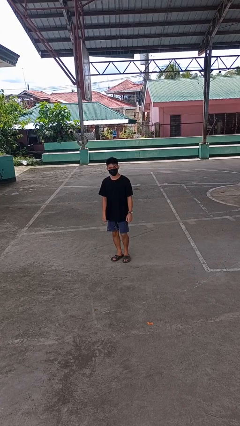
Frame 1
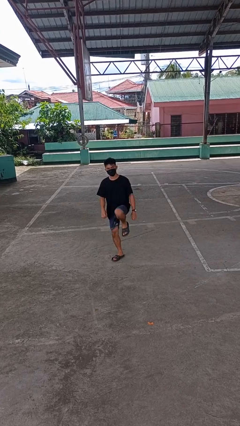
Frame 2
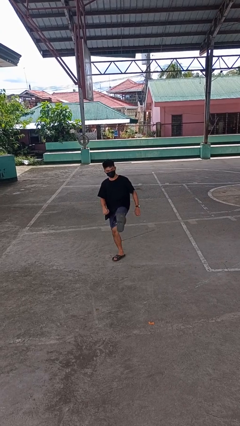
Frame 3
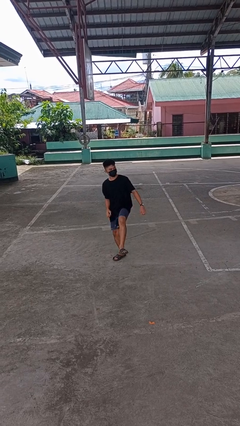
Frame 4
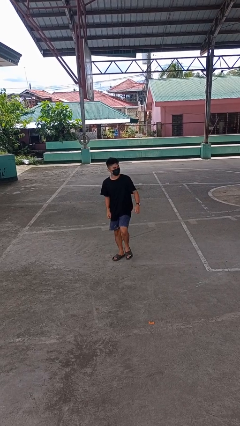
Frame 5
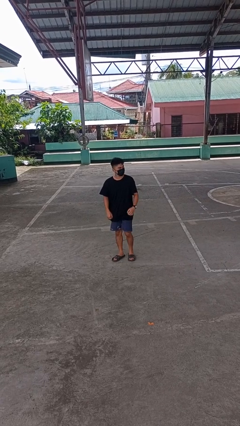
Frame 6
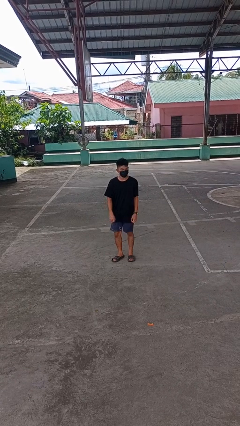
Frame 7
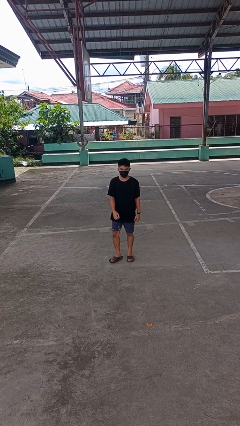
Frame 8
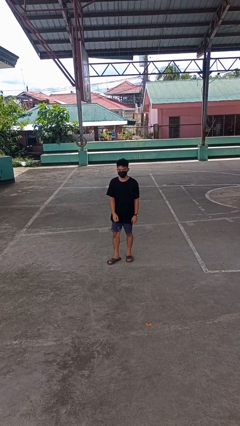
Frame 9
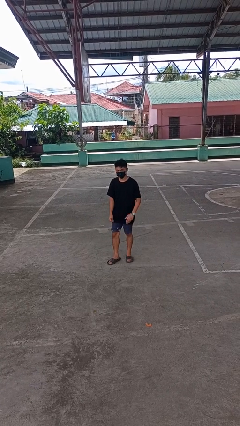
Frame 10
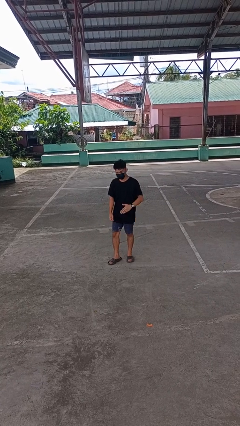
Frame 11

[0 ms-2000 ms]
person karate kicks

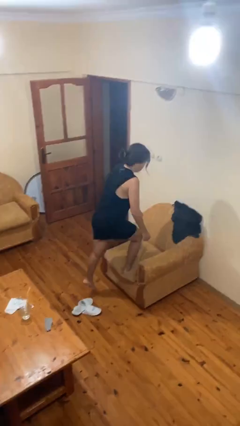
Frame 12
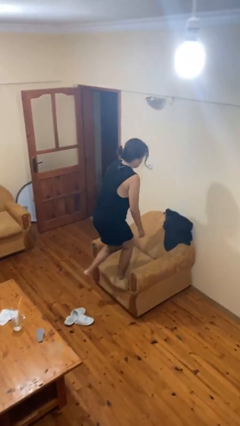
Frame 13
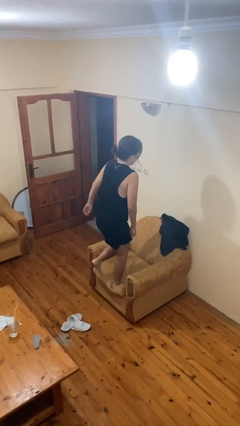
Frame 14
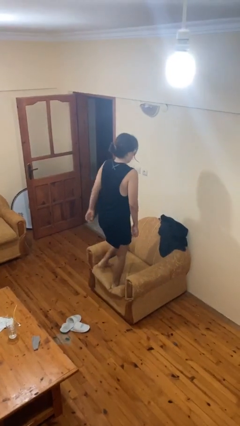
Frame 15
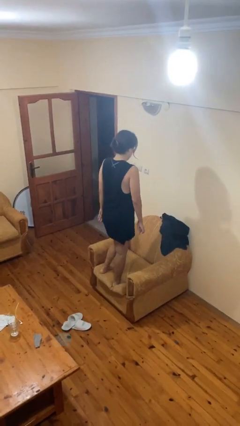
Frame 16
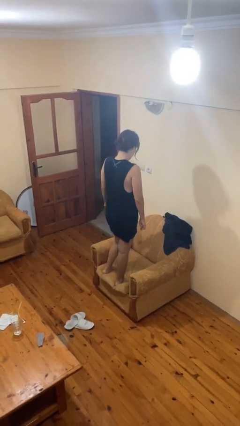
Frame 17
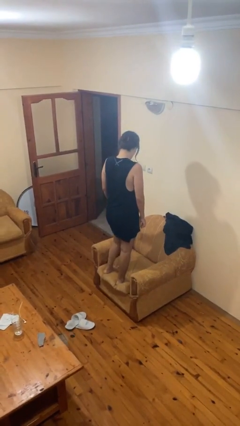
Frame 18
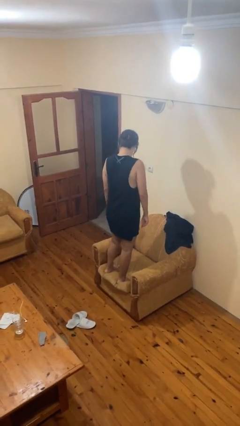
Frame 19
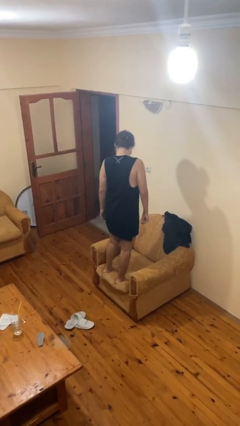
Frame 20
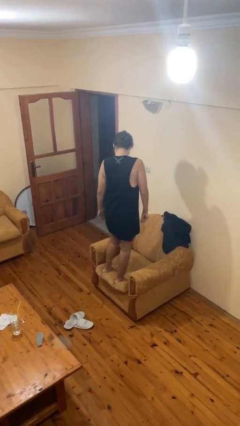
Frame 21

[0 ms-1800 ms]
person climbs on chair

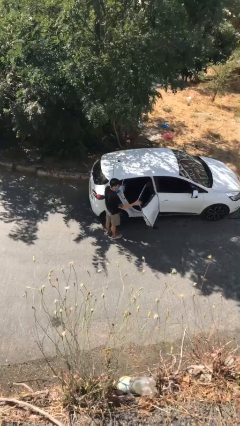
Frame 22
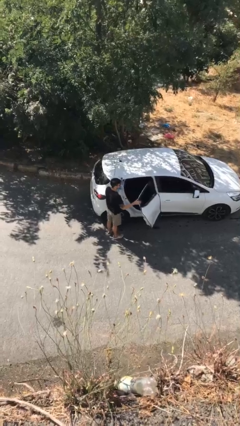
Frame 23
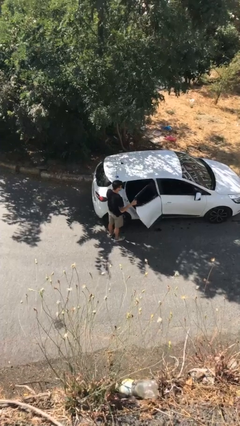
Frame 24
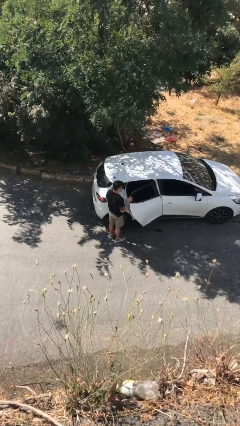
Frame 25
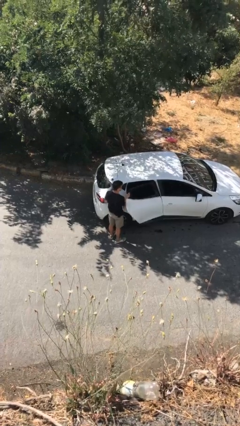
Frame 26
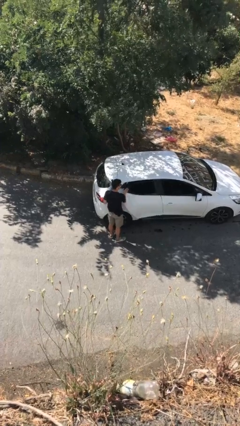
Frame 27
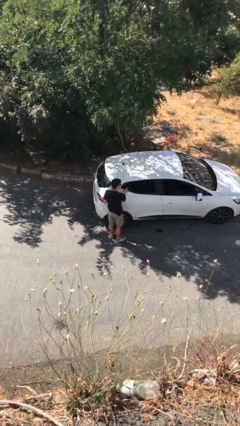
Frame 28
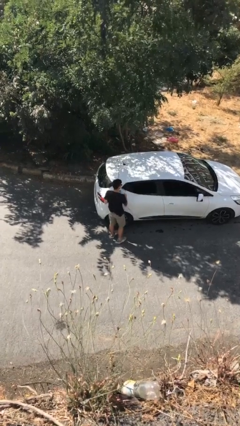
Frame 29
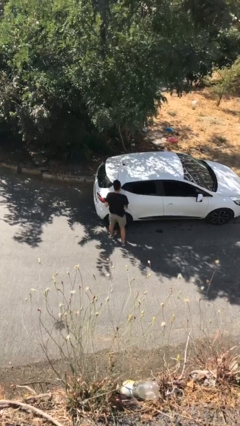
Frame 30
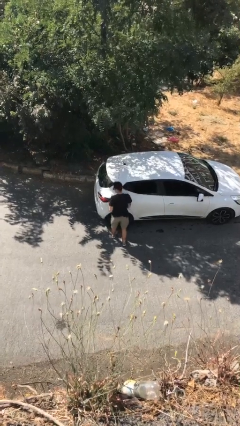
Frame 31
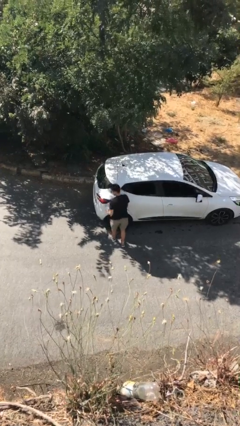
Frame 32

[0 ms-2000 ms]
person closes car door

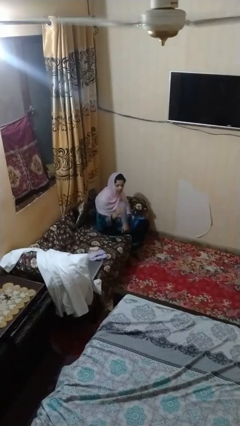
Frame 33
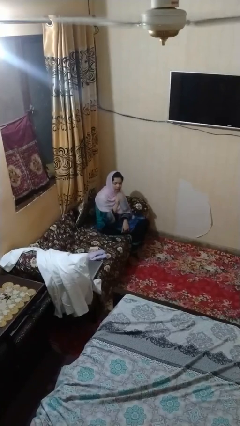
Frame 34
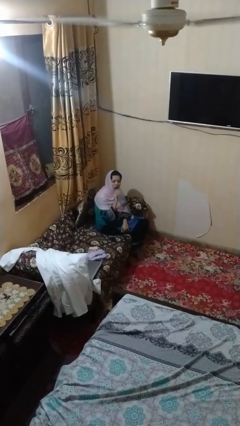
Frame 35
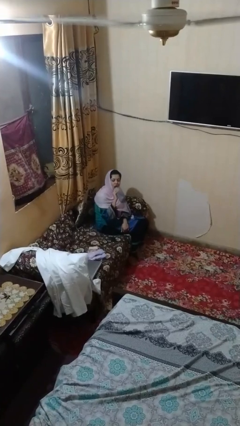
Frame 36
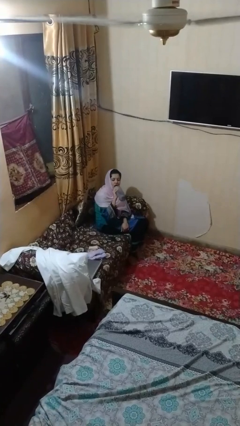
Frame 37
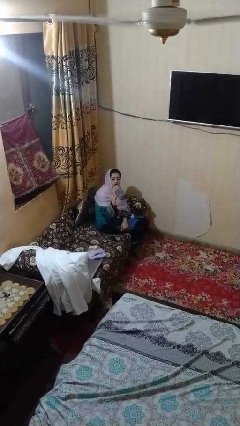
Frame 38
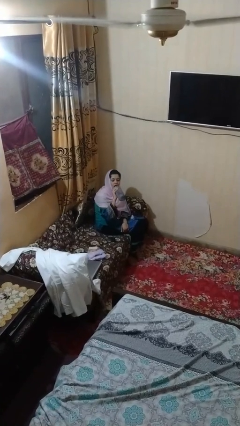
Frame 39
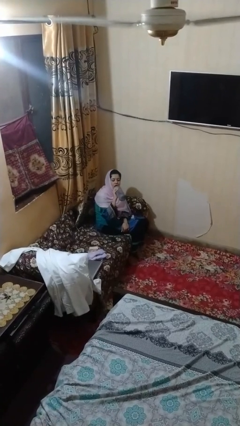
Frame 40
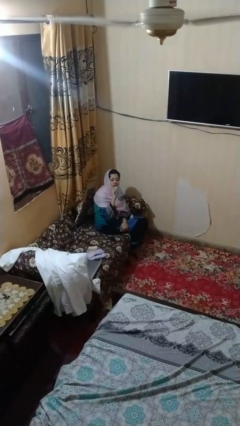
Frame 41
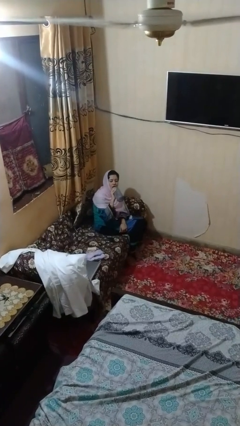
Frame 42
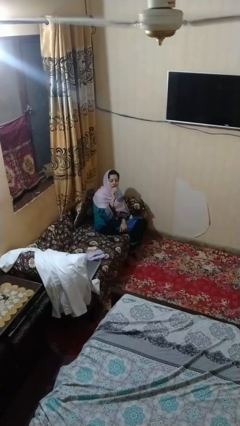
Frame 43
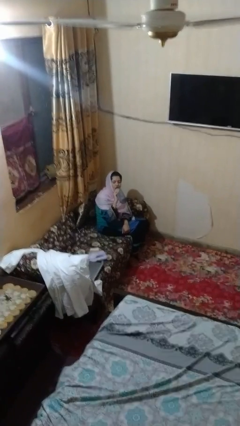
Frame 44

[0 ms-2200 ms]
person drinks from bottle

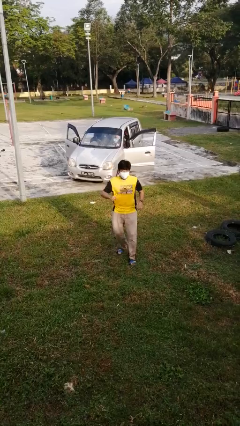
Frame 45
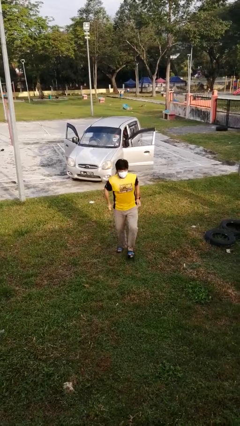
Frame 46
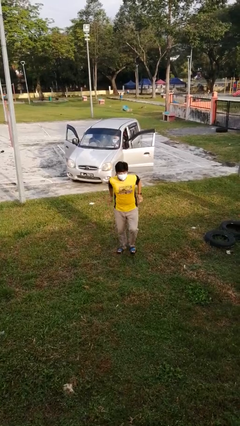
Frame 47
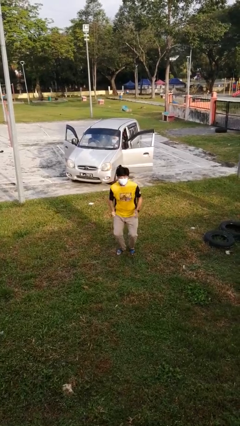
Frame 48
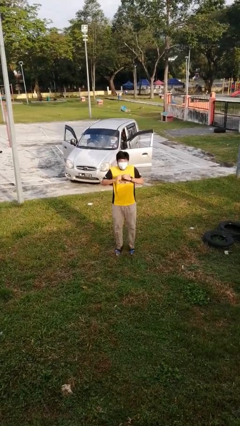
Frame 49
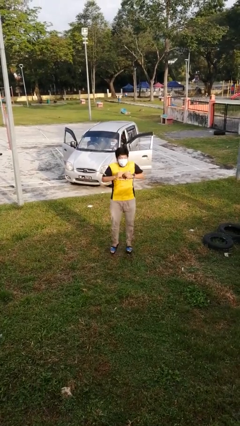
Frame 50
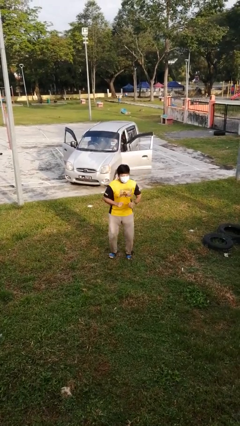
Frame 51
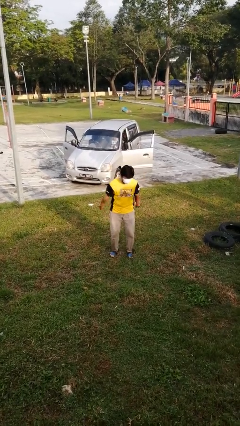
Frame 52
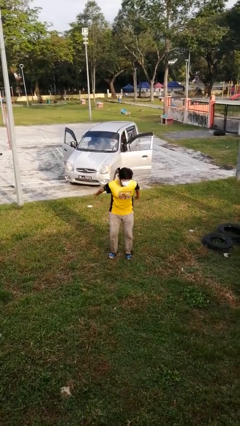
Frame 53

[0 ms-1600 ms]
person jumps

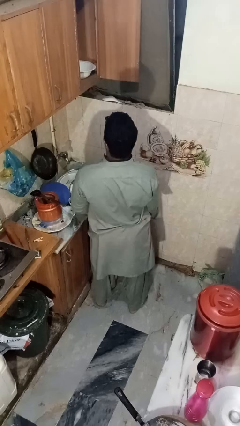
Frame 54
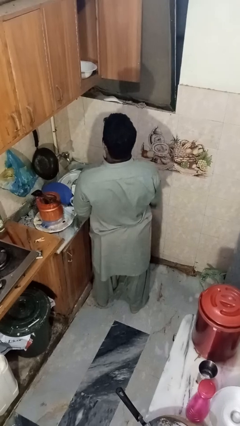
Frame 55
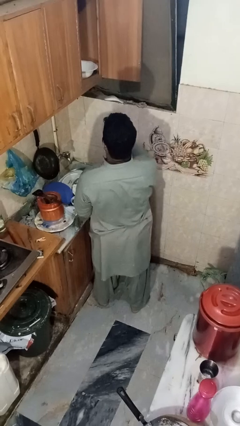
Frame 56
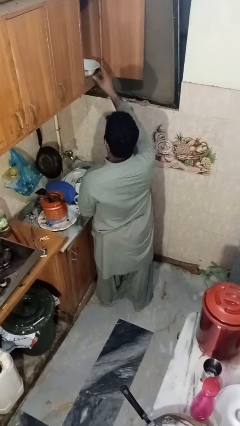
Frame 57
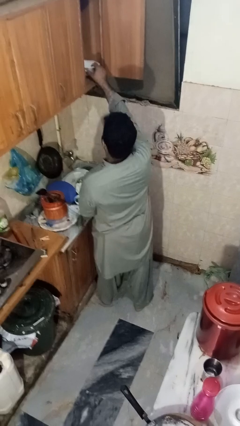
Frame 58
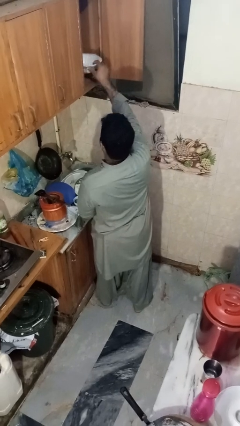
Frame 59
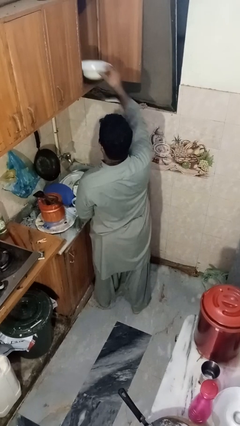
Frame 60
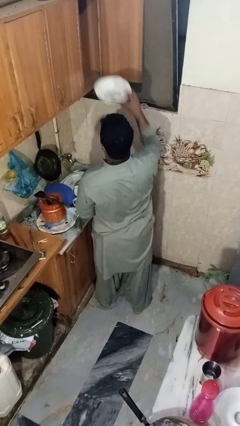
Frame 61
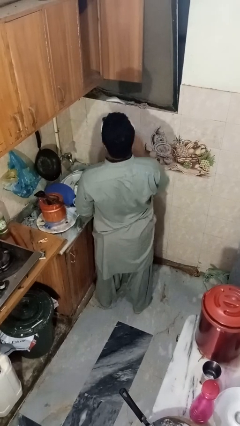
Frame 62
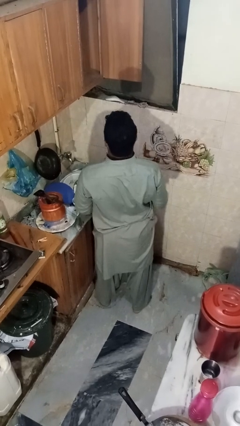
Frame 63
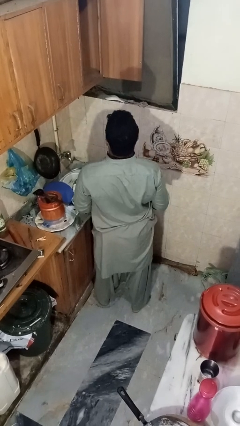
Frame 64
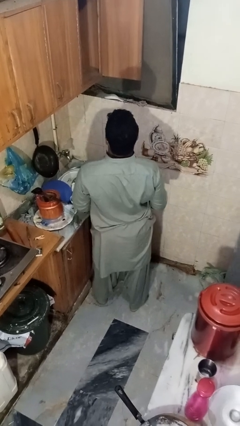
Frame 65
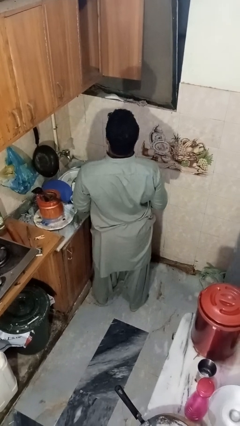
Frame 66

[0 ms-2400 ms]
person takes object from cabinet

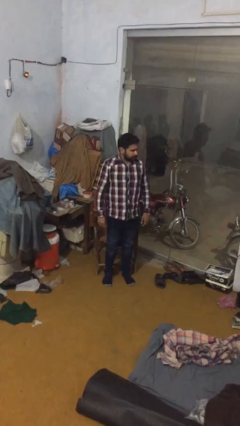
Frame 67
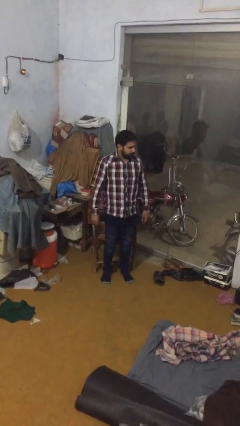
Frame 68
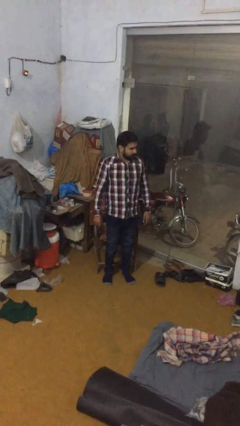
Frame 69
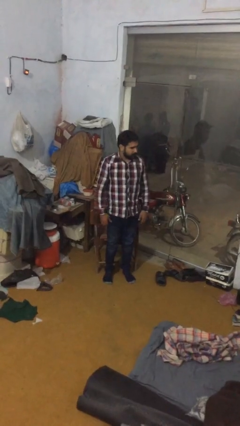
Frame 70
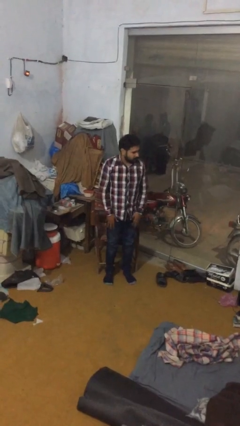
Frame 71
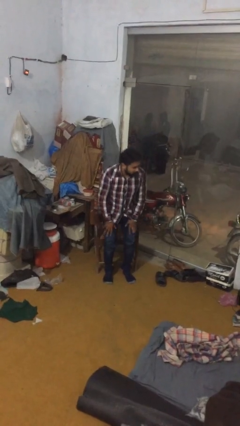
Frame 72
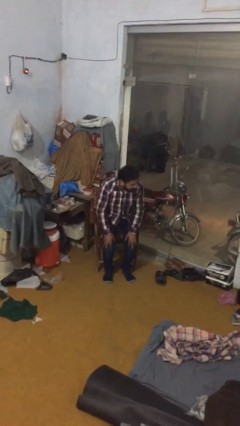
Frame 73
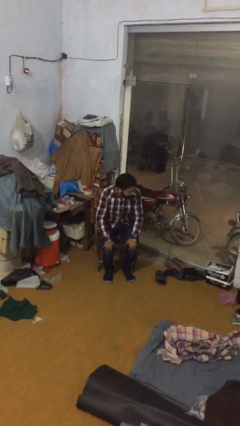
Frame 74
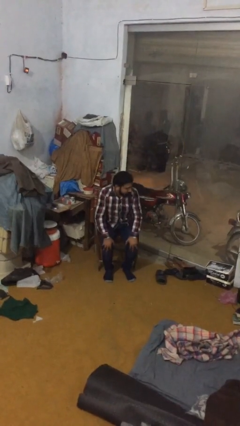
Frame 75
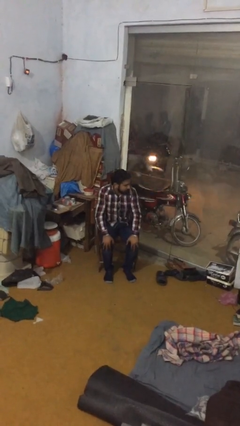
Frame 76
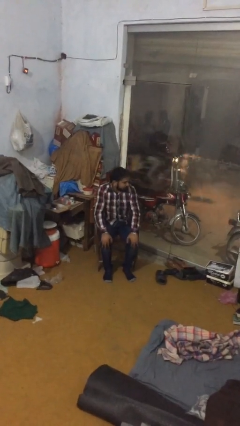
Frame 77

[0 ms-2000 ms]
person sits down

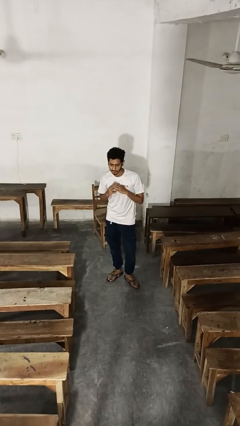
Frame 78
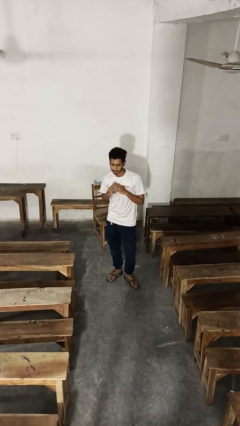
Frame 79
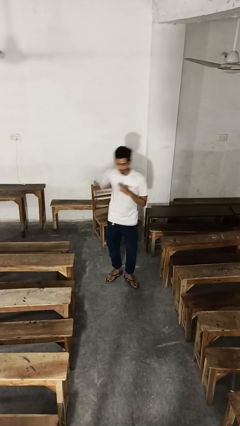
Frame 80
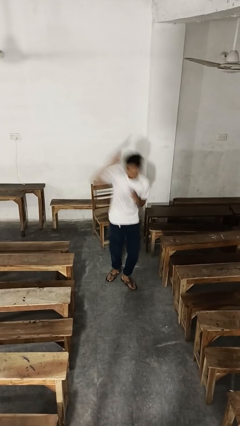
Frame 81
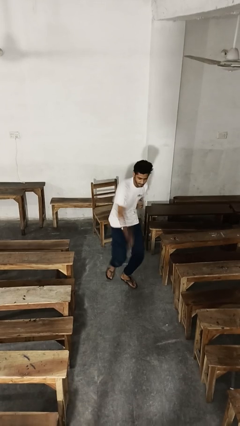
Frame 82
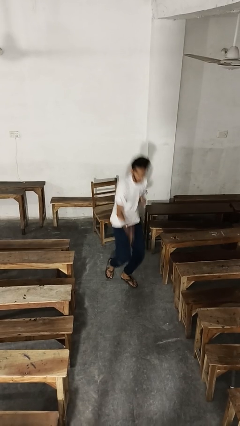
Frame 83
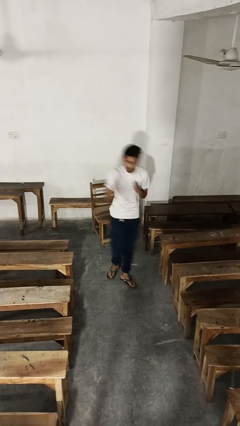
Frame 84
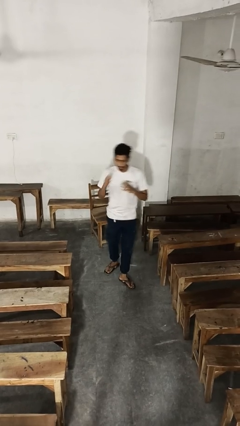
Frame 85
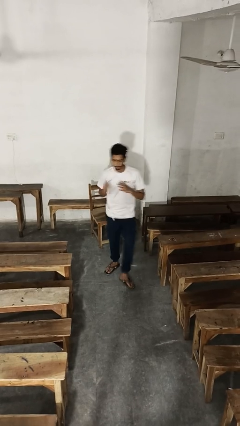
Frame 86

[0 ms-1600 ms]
person karate chop

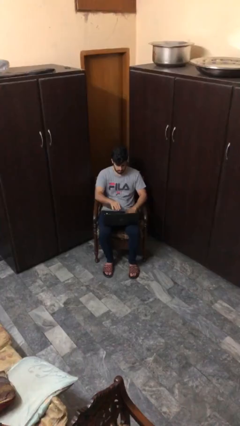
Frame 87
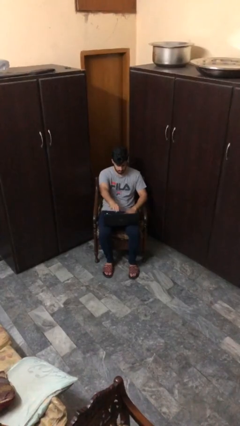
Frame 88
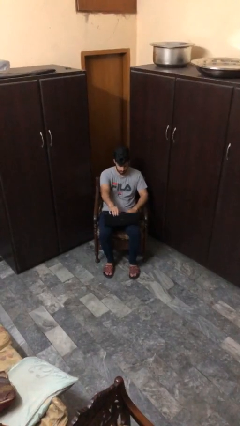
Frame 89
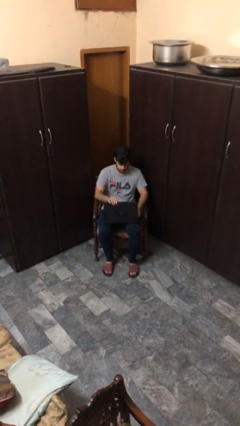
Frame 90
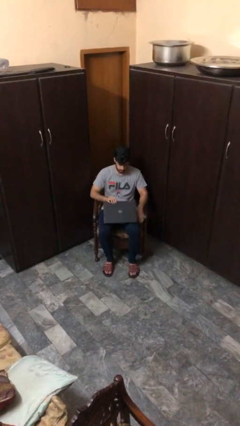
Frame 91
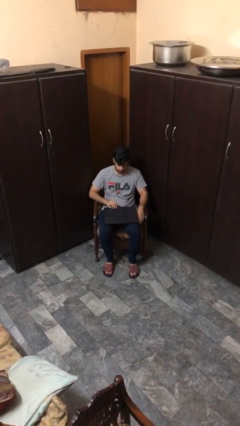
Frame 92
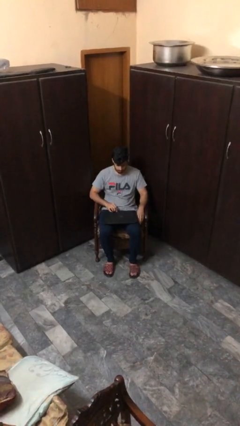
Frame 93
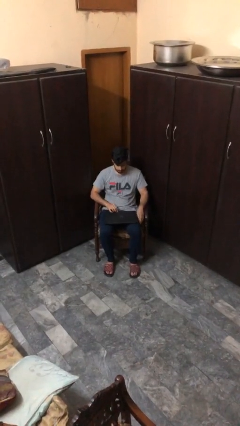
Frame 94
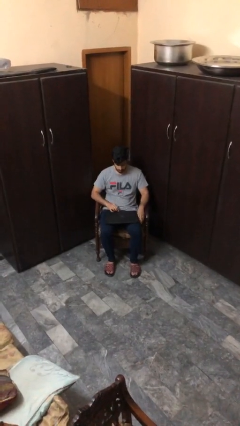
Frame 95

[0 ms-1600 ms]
person closes laptop
